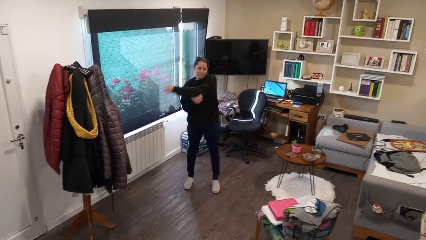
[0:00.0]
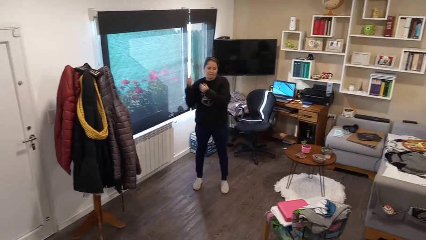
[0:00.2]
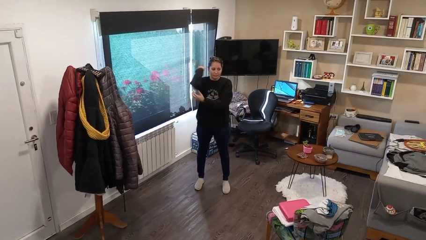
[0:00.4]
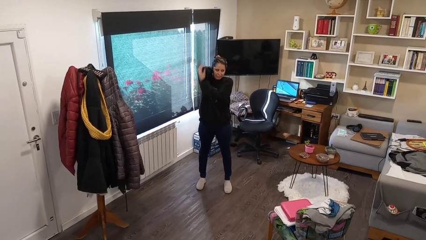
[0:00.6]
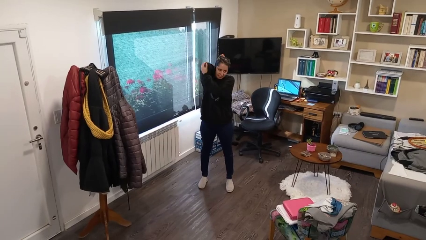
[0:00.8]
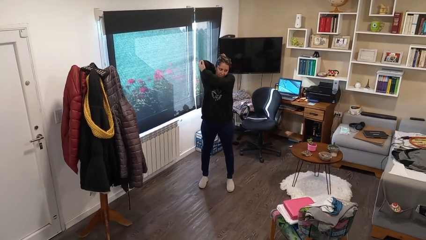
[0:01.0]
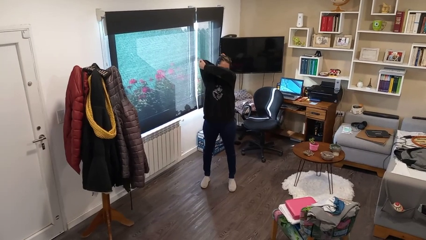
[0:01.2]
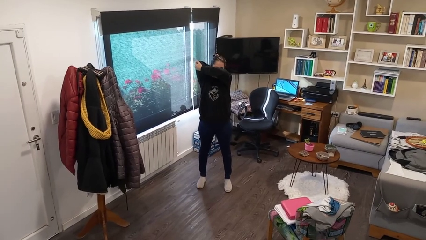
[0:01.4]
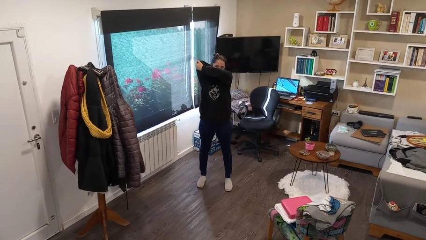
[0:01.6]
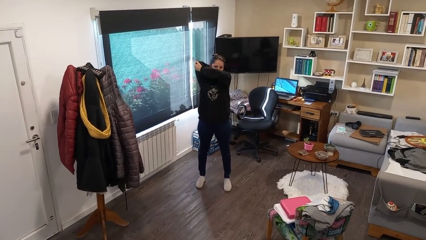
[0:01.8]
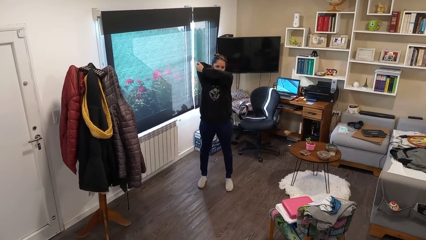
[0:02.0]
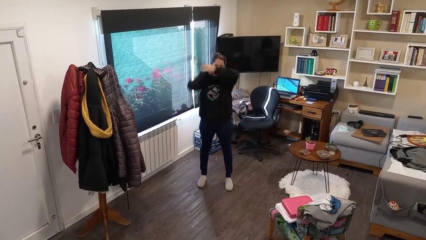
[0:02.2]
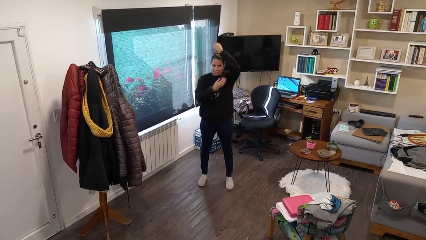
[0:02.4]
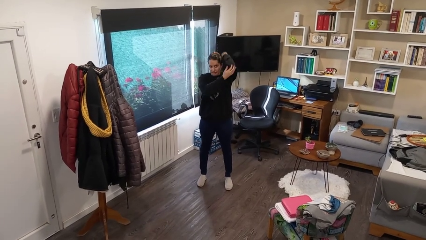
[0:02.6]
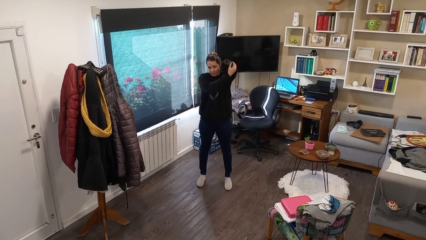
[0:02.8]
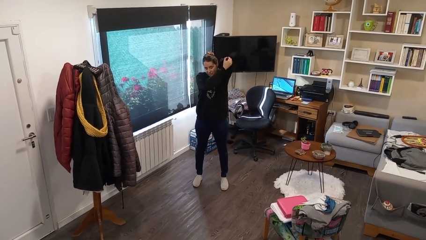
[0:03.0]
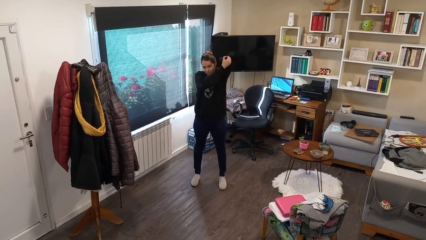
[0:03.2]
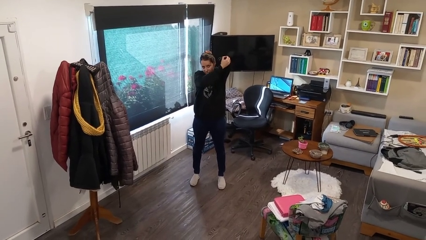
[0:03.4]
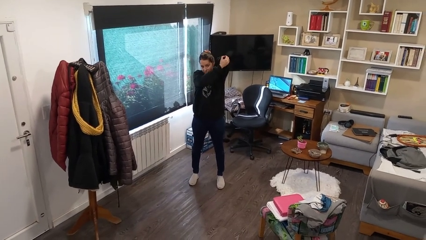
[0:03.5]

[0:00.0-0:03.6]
person stretches arms over head

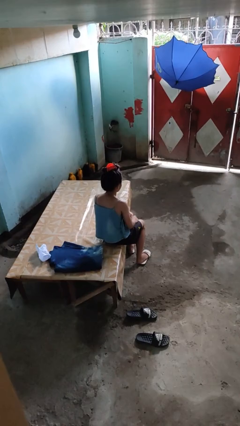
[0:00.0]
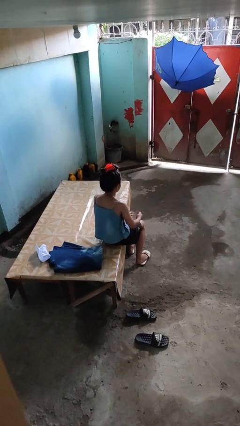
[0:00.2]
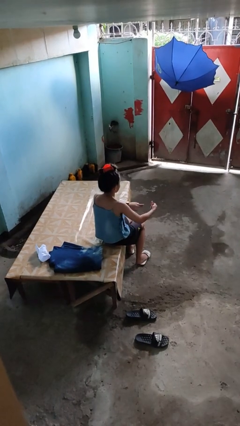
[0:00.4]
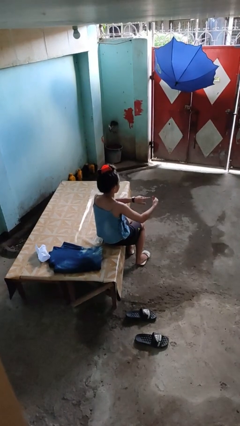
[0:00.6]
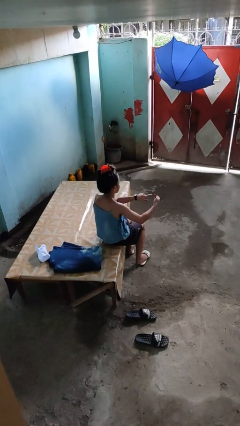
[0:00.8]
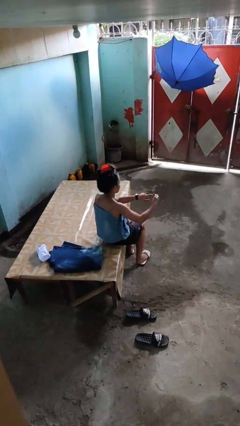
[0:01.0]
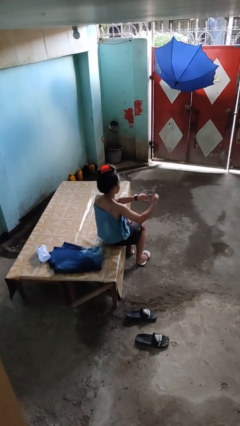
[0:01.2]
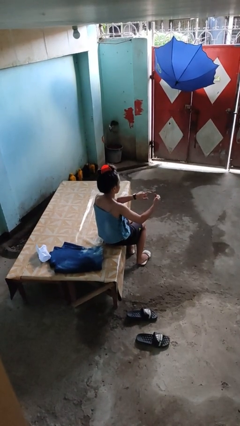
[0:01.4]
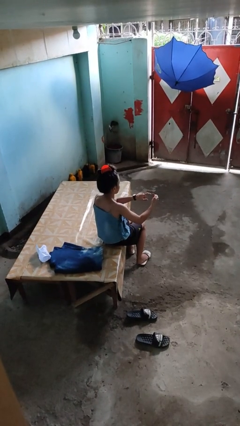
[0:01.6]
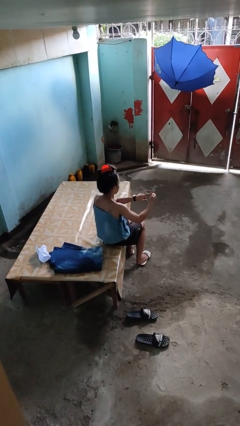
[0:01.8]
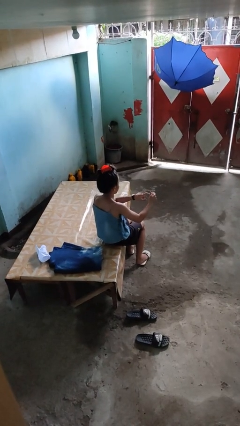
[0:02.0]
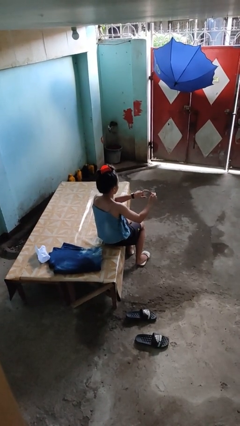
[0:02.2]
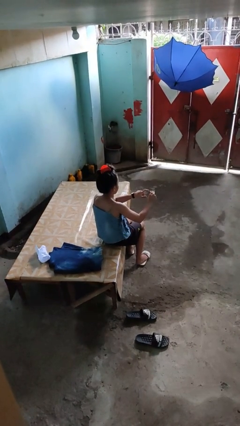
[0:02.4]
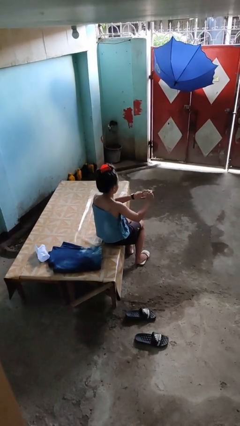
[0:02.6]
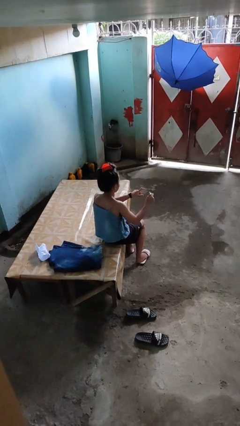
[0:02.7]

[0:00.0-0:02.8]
person files fingernails

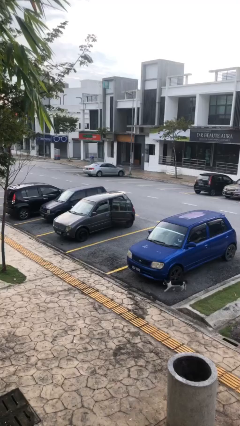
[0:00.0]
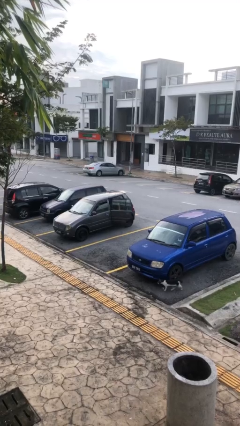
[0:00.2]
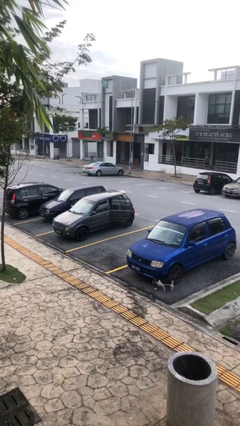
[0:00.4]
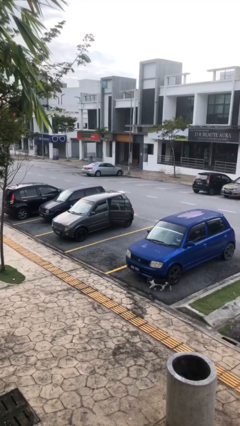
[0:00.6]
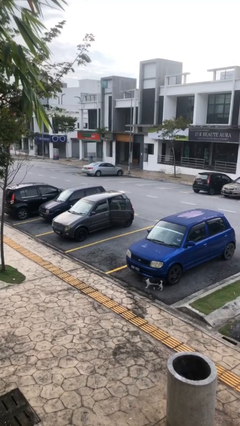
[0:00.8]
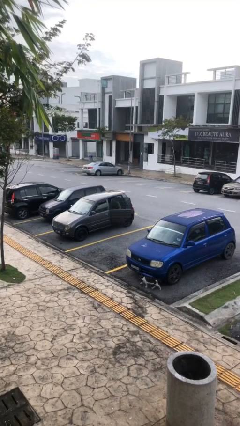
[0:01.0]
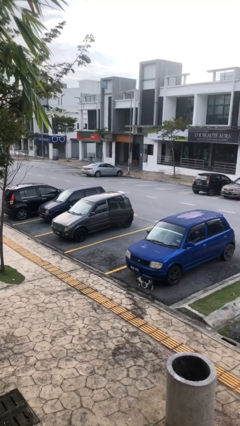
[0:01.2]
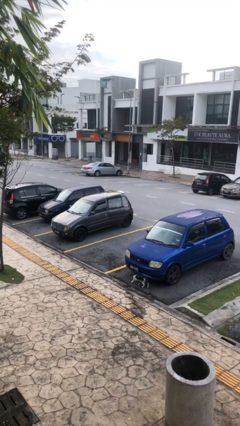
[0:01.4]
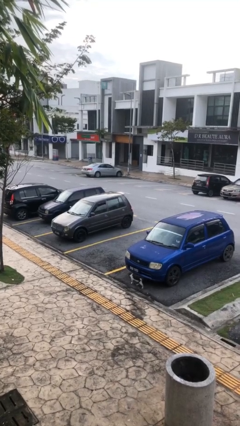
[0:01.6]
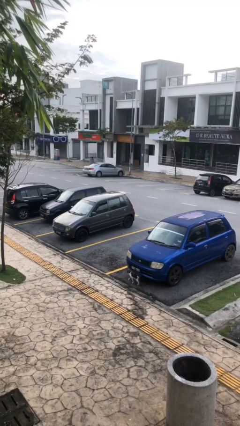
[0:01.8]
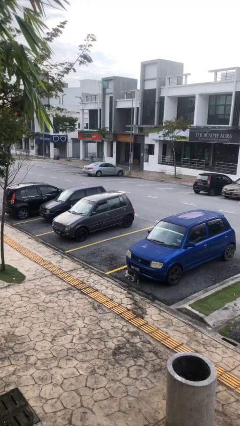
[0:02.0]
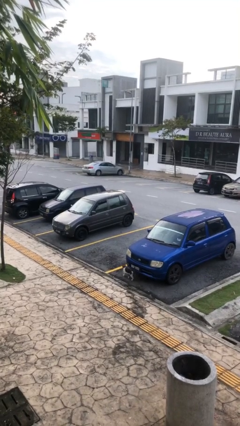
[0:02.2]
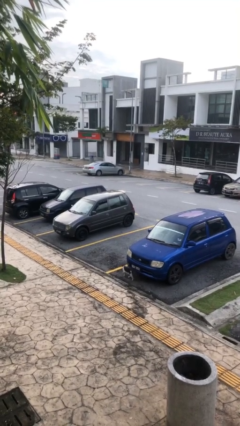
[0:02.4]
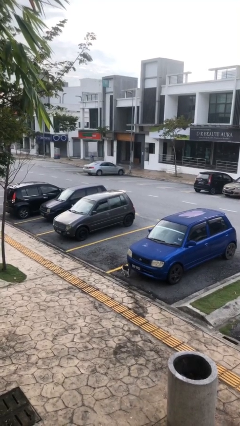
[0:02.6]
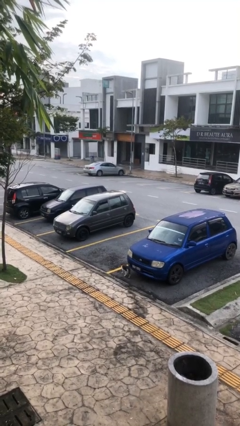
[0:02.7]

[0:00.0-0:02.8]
person closes car door

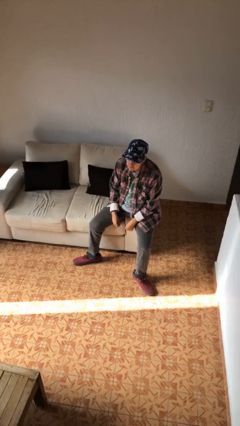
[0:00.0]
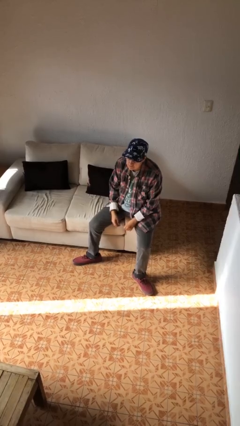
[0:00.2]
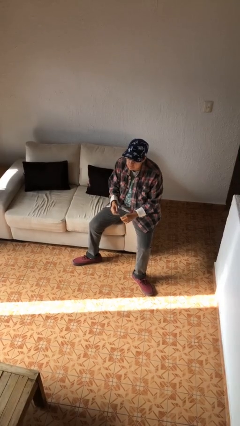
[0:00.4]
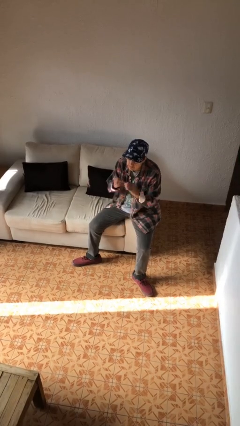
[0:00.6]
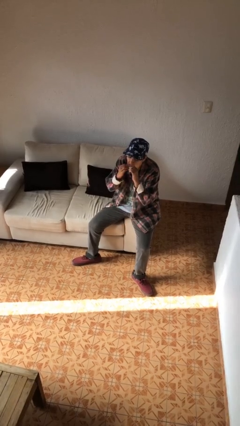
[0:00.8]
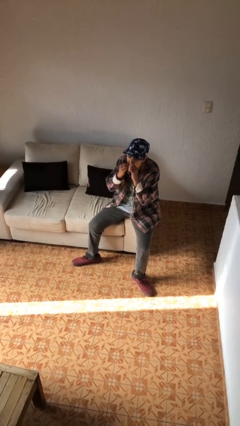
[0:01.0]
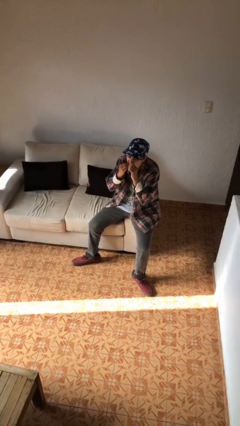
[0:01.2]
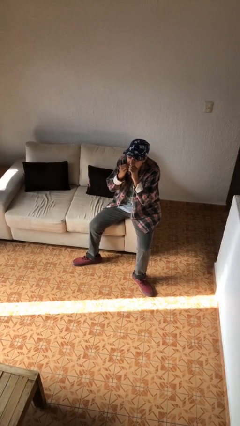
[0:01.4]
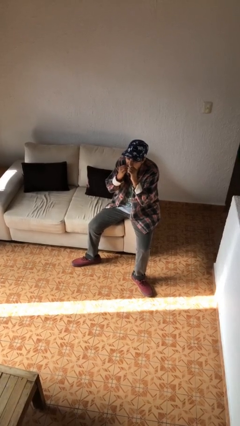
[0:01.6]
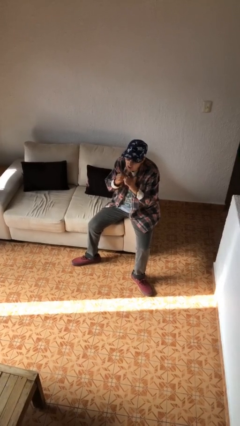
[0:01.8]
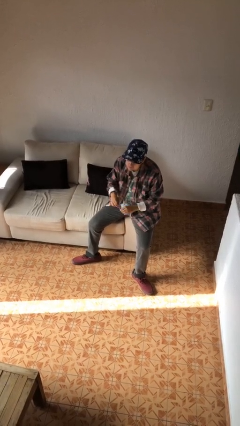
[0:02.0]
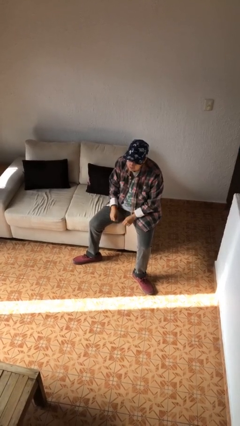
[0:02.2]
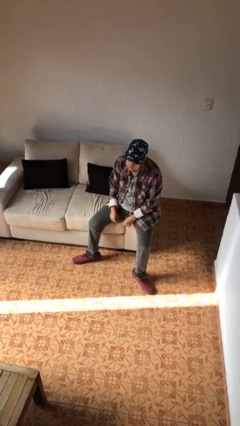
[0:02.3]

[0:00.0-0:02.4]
person flosses

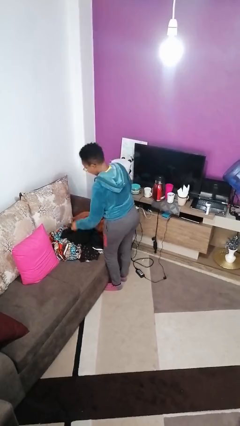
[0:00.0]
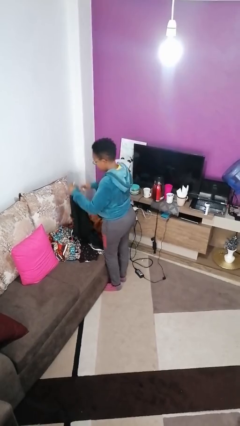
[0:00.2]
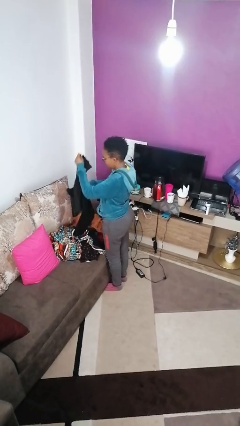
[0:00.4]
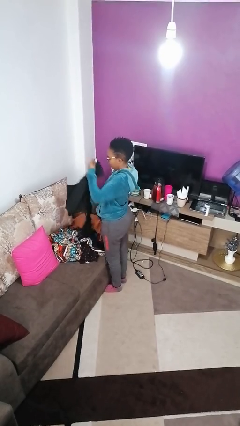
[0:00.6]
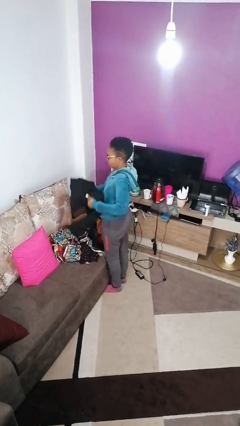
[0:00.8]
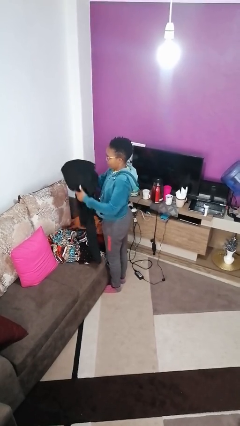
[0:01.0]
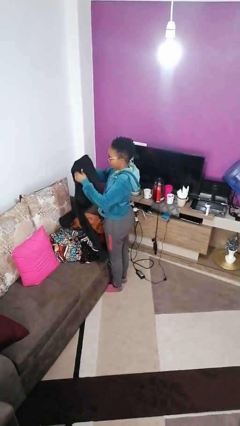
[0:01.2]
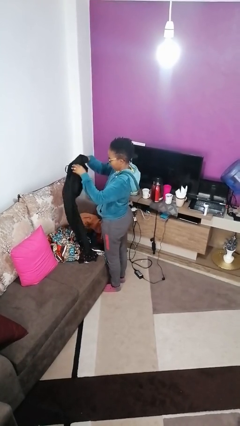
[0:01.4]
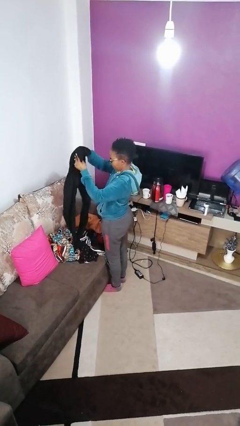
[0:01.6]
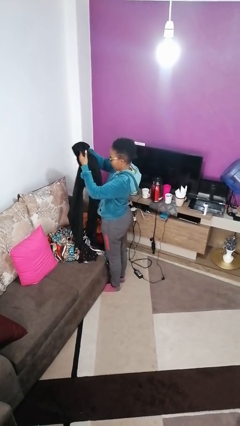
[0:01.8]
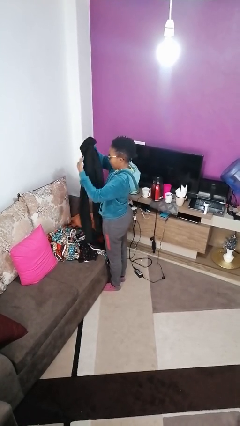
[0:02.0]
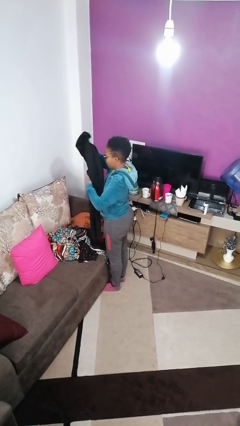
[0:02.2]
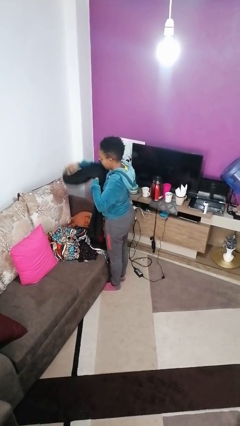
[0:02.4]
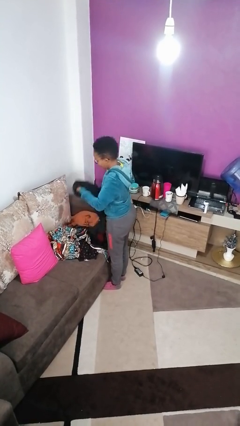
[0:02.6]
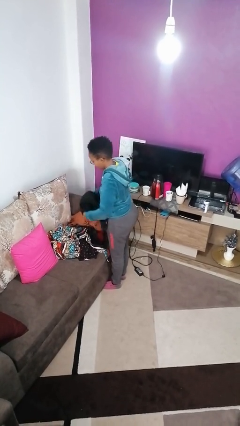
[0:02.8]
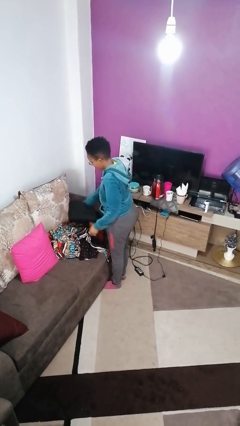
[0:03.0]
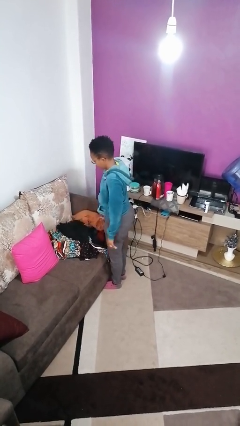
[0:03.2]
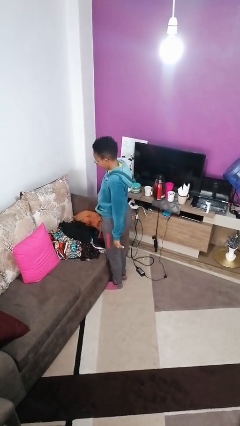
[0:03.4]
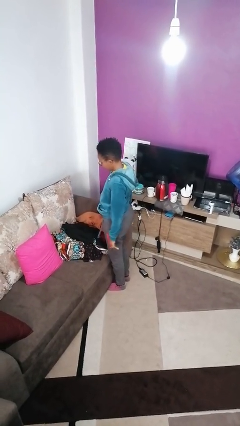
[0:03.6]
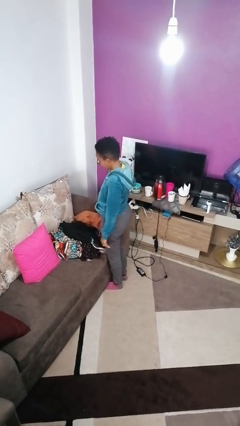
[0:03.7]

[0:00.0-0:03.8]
person folds pants

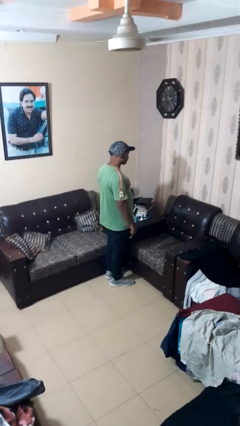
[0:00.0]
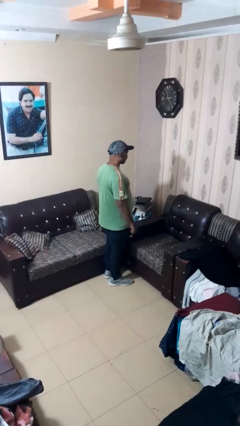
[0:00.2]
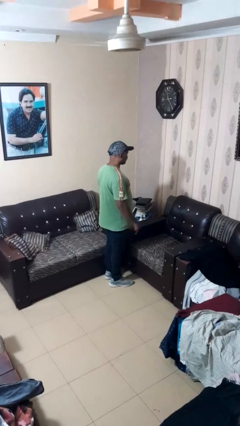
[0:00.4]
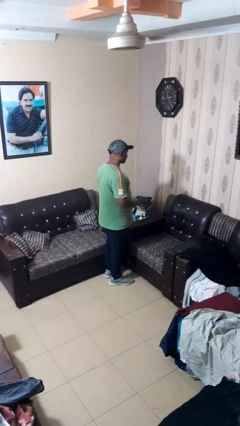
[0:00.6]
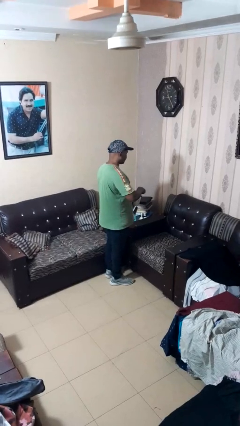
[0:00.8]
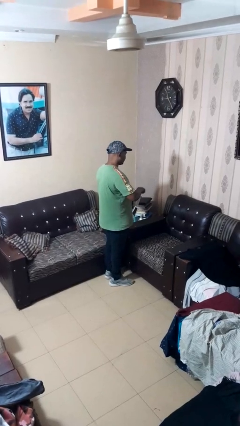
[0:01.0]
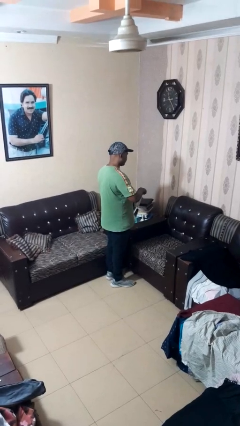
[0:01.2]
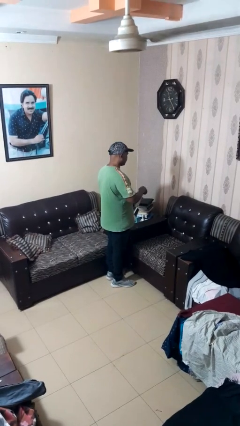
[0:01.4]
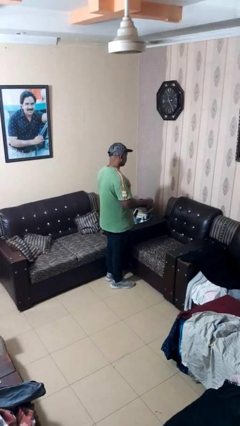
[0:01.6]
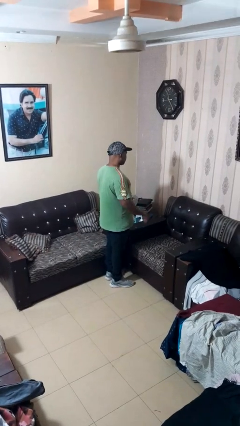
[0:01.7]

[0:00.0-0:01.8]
person stirs mug
